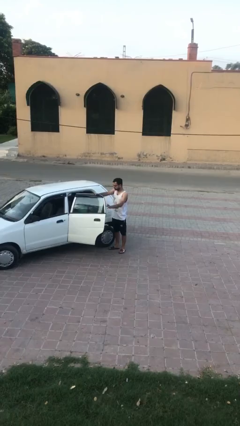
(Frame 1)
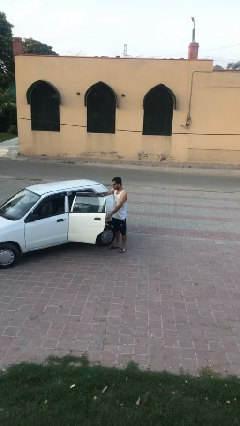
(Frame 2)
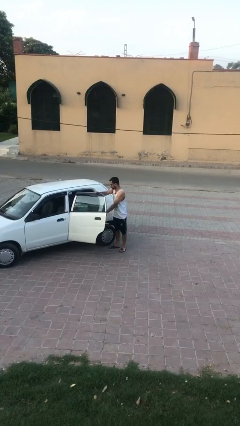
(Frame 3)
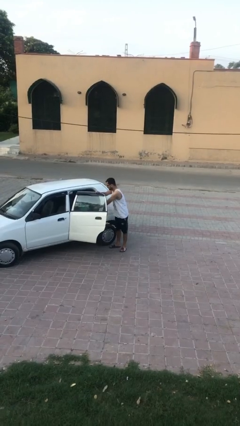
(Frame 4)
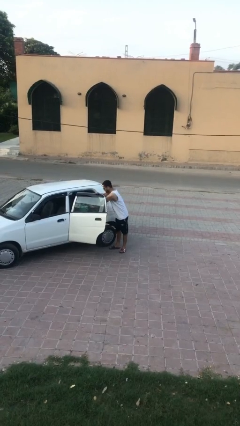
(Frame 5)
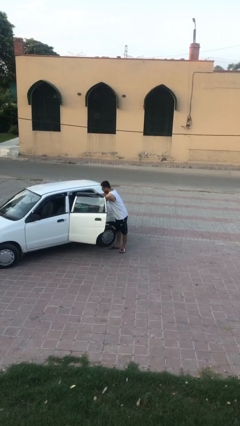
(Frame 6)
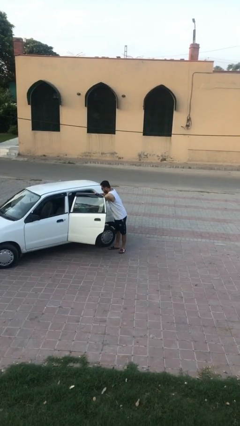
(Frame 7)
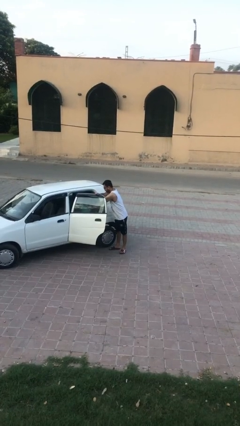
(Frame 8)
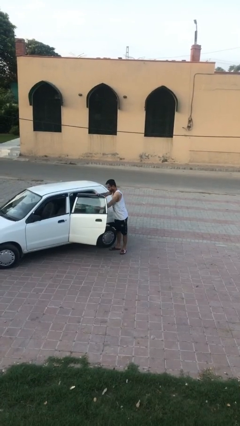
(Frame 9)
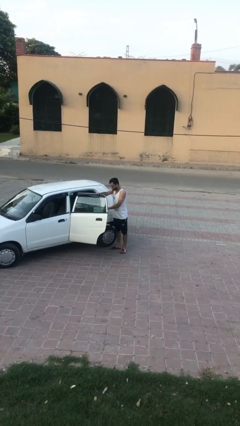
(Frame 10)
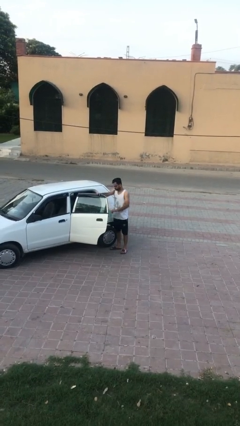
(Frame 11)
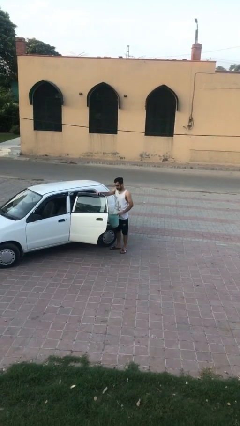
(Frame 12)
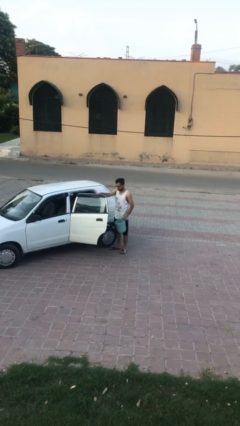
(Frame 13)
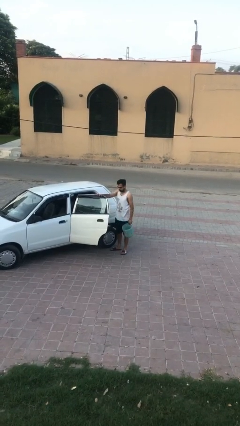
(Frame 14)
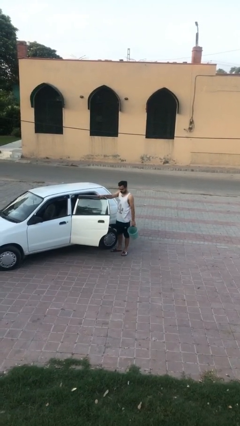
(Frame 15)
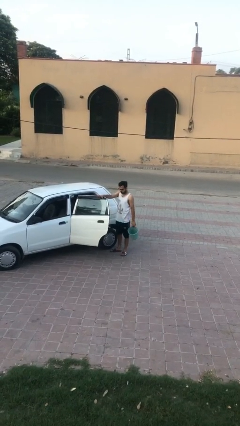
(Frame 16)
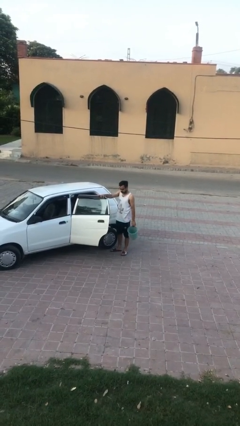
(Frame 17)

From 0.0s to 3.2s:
person unloads car

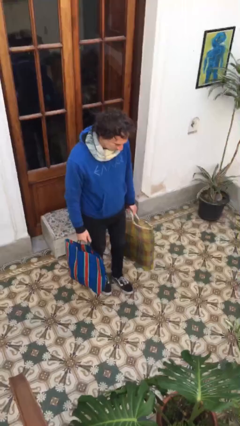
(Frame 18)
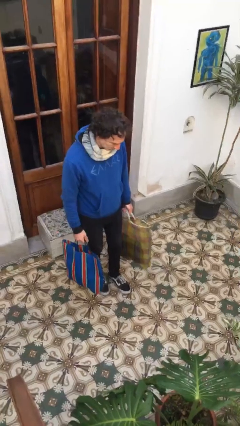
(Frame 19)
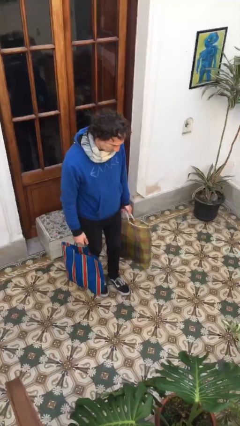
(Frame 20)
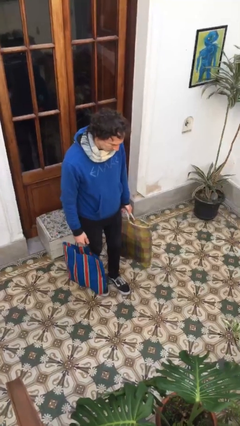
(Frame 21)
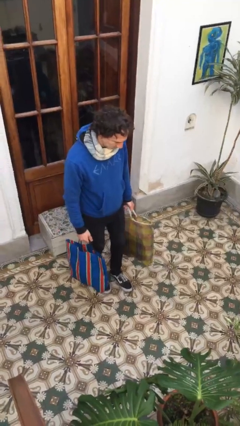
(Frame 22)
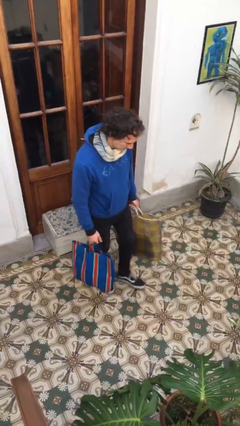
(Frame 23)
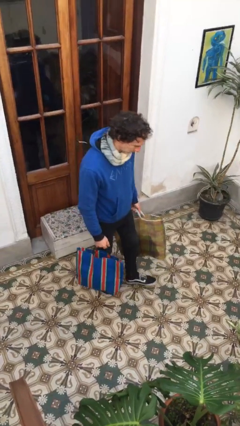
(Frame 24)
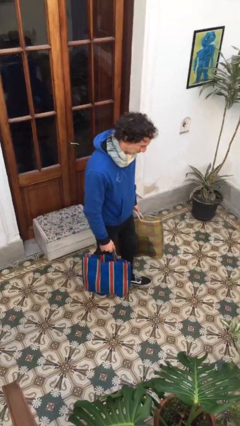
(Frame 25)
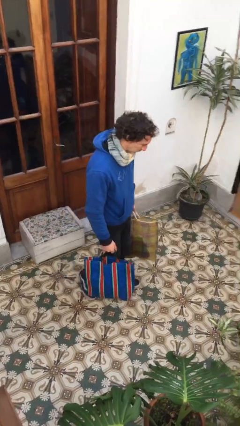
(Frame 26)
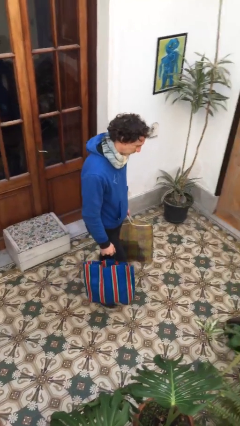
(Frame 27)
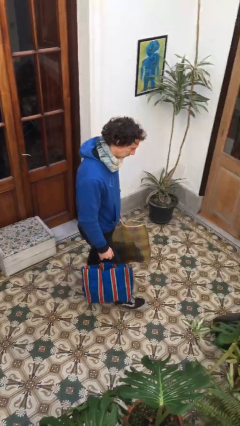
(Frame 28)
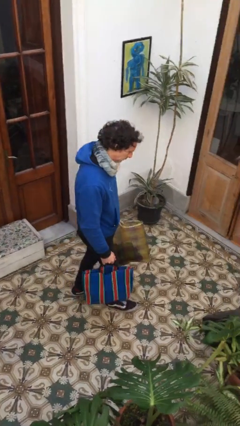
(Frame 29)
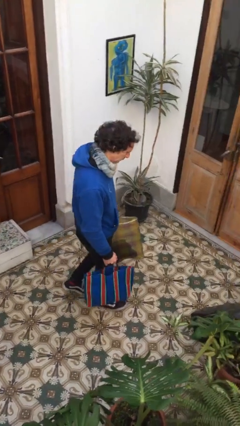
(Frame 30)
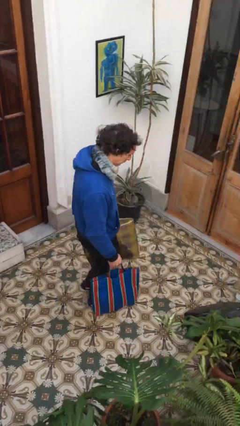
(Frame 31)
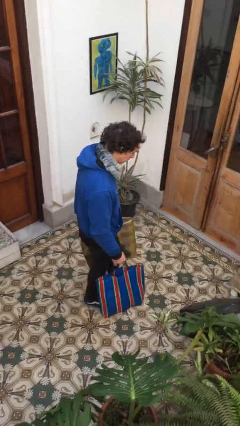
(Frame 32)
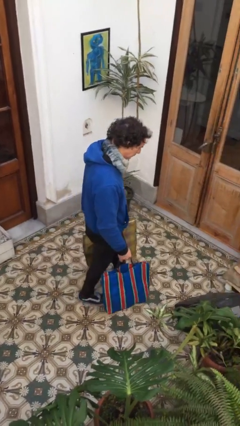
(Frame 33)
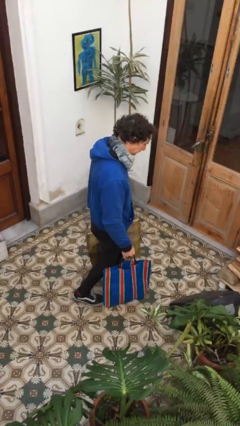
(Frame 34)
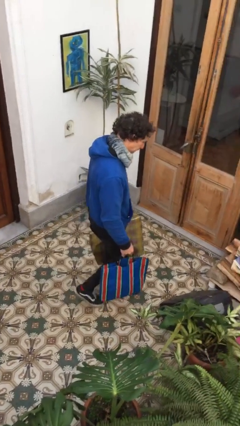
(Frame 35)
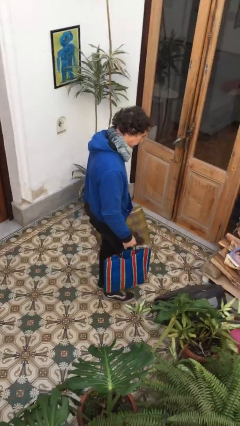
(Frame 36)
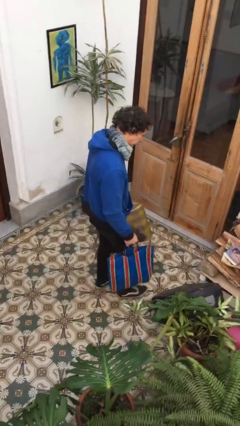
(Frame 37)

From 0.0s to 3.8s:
person carries groceries

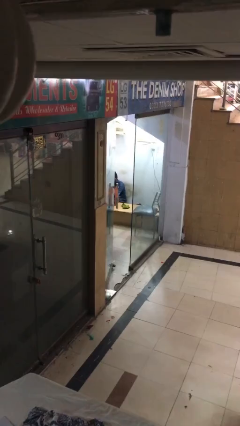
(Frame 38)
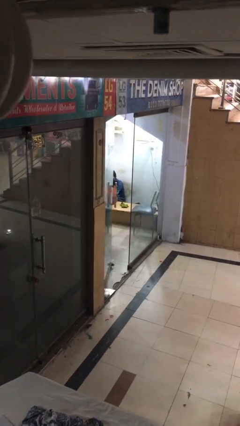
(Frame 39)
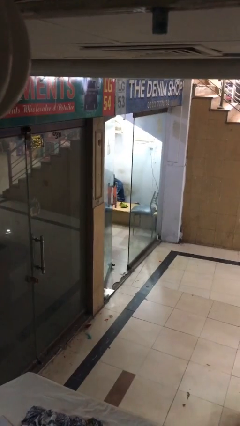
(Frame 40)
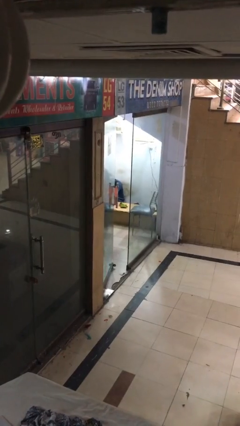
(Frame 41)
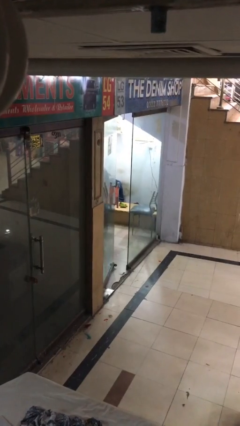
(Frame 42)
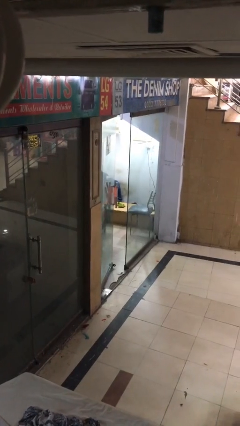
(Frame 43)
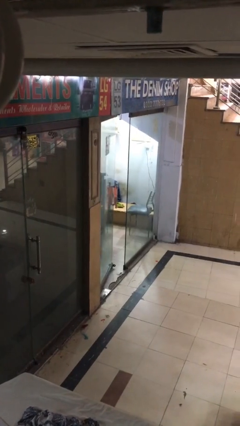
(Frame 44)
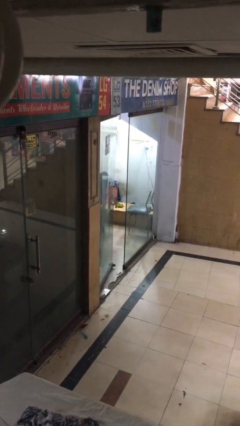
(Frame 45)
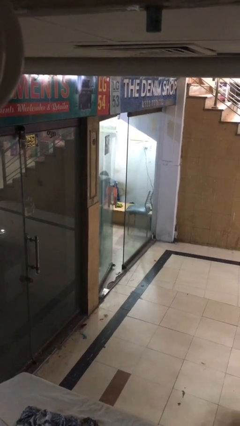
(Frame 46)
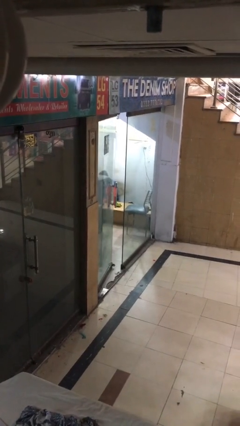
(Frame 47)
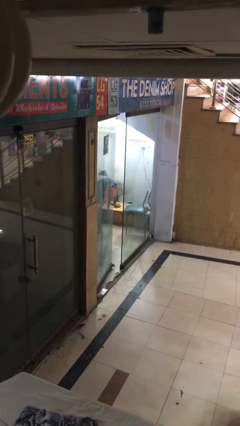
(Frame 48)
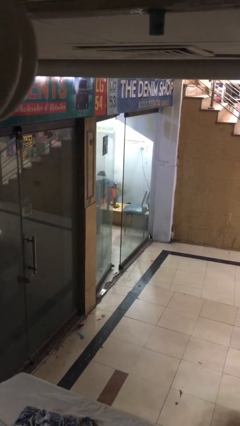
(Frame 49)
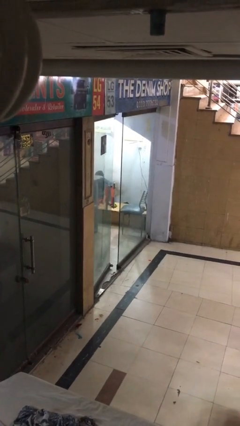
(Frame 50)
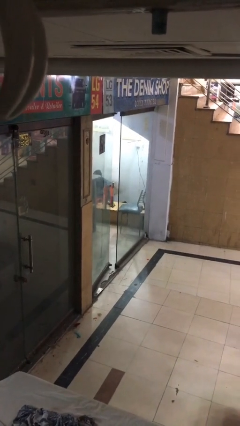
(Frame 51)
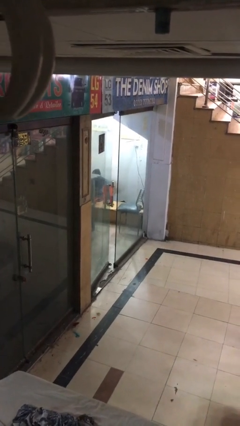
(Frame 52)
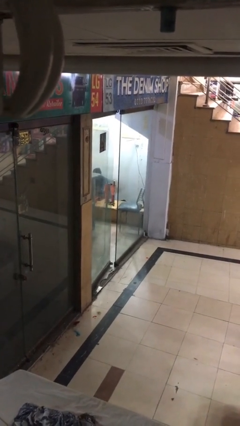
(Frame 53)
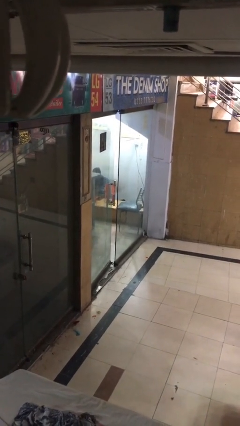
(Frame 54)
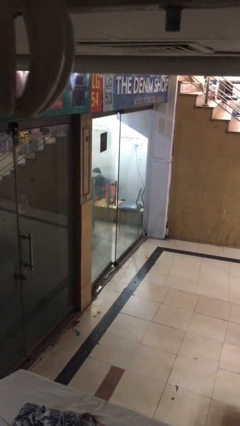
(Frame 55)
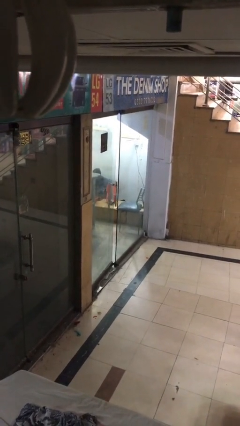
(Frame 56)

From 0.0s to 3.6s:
person closes facility door

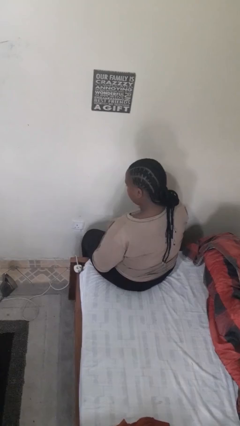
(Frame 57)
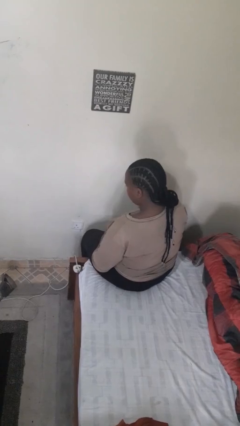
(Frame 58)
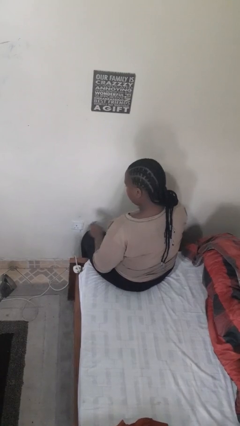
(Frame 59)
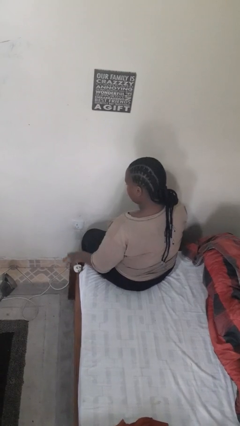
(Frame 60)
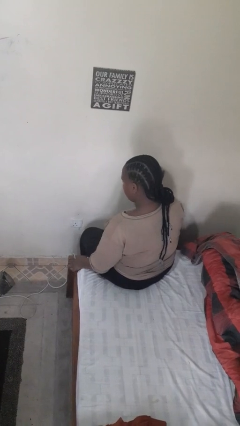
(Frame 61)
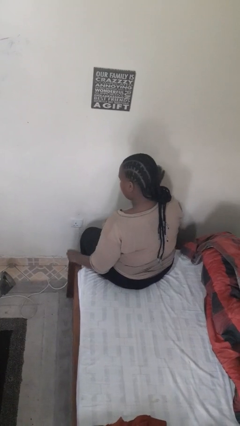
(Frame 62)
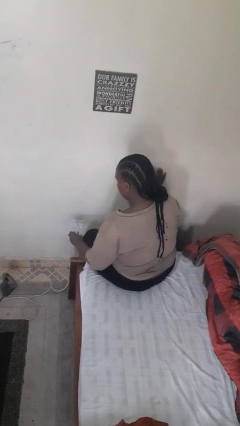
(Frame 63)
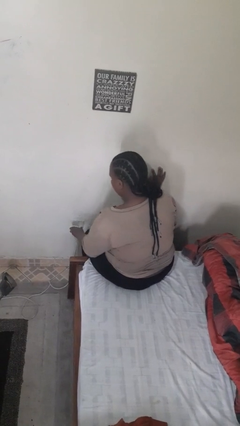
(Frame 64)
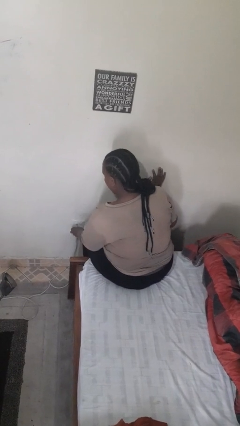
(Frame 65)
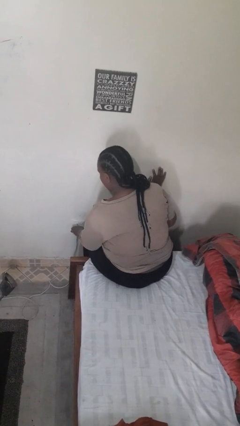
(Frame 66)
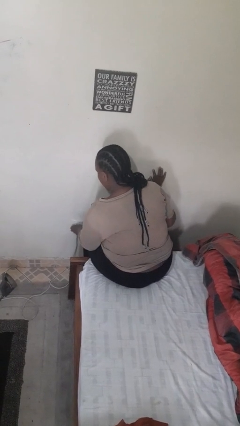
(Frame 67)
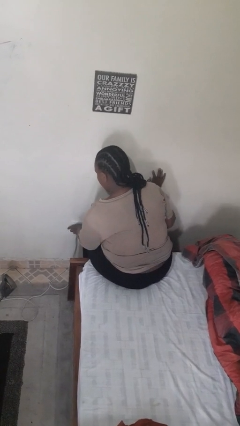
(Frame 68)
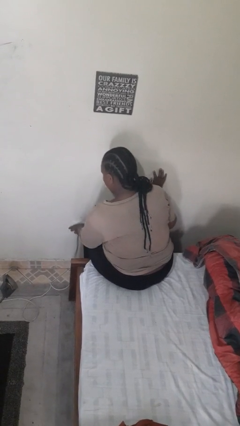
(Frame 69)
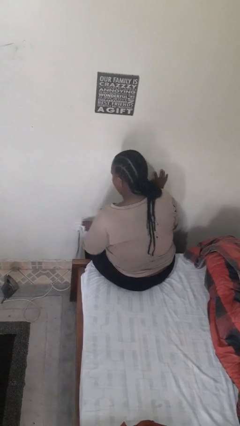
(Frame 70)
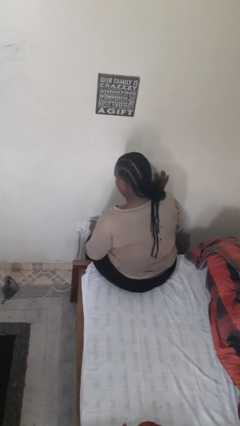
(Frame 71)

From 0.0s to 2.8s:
person plugs into electrical socket

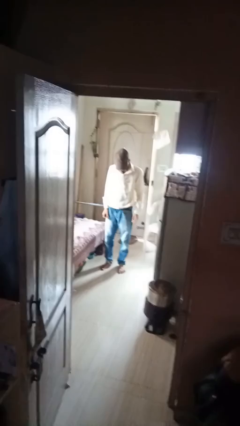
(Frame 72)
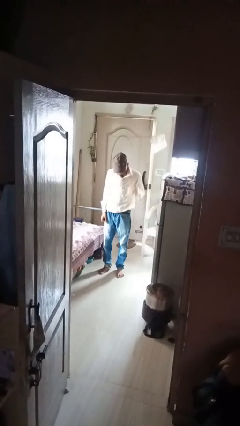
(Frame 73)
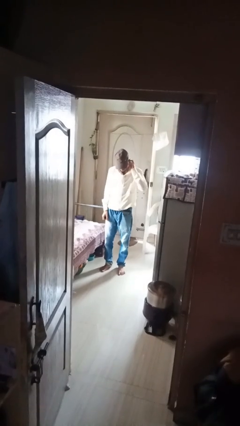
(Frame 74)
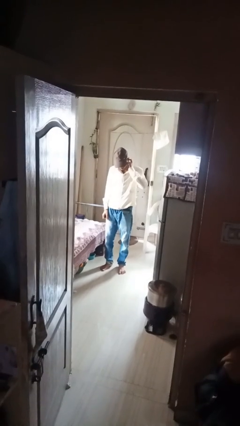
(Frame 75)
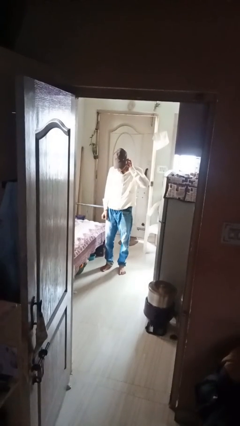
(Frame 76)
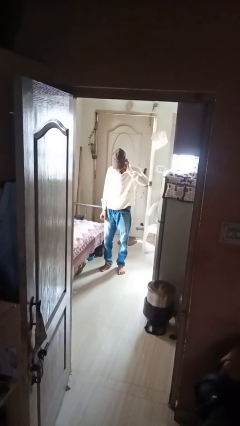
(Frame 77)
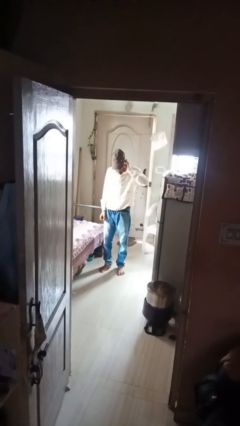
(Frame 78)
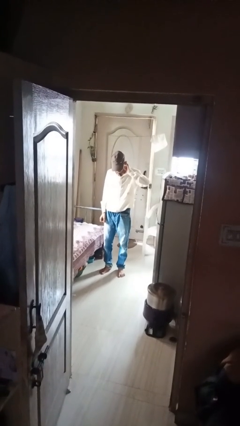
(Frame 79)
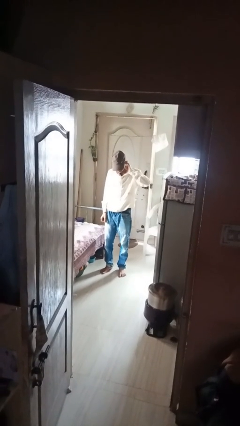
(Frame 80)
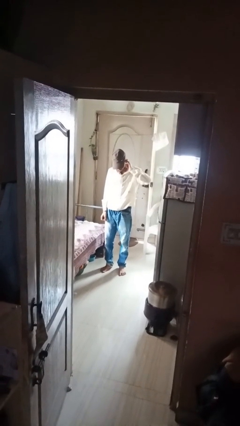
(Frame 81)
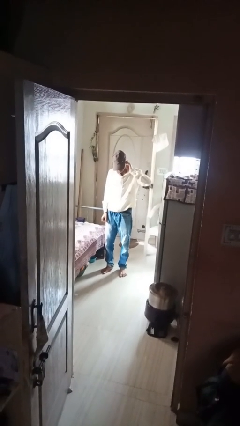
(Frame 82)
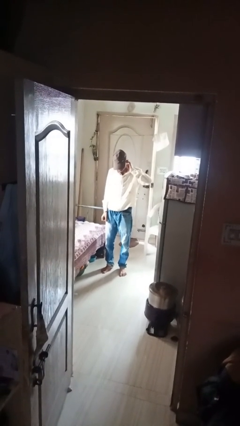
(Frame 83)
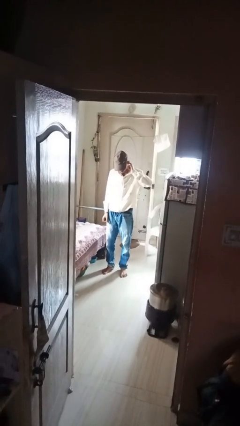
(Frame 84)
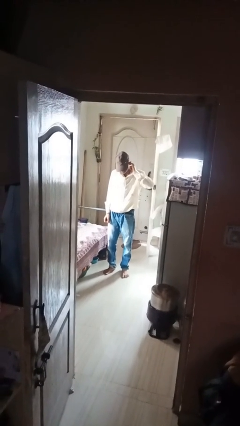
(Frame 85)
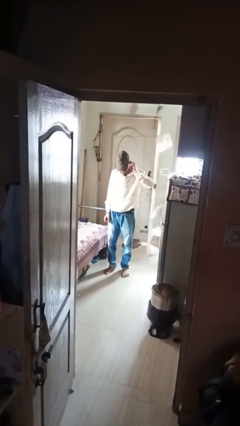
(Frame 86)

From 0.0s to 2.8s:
person touches earlobe

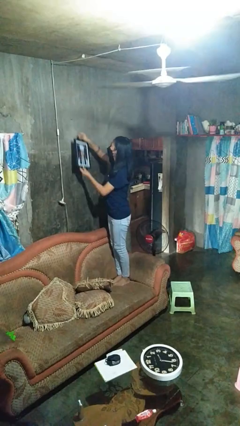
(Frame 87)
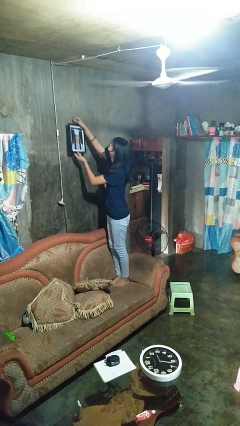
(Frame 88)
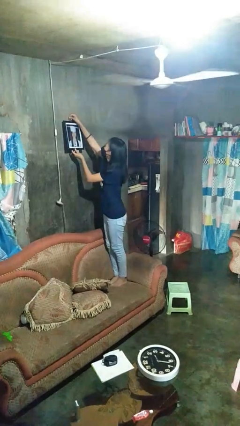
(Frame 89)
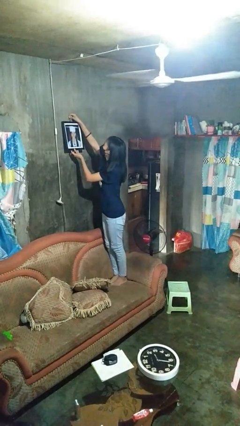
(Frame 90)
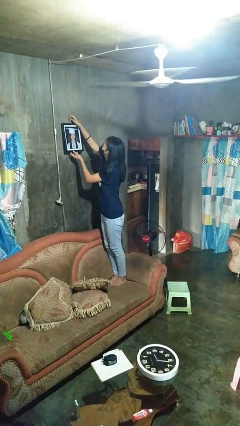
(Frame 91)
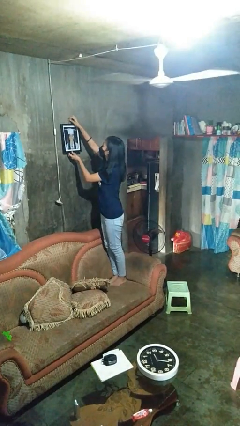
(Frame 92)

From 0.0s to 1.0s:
person puts up picture frame
